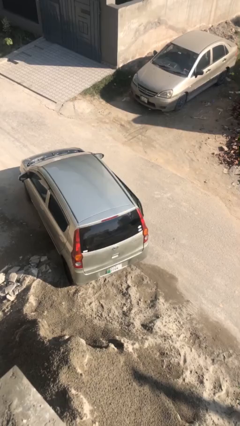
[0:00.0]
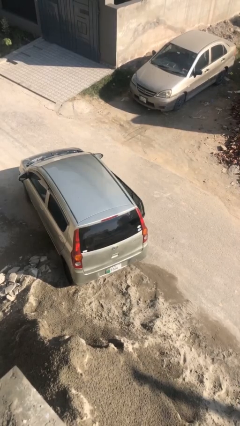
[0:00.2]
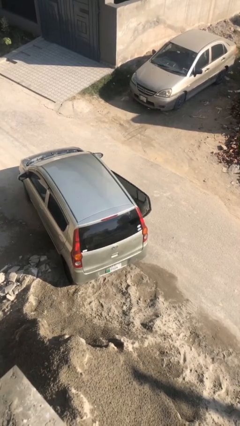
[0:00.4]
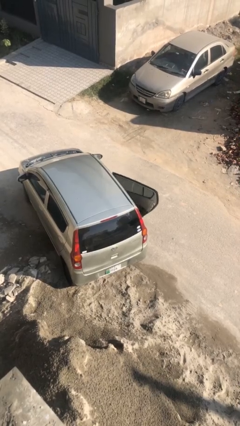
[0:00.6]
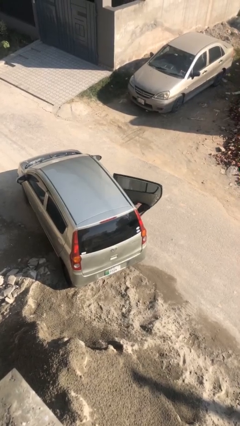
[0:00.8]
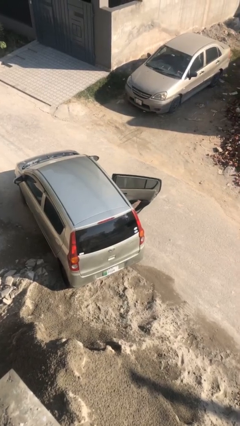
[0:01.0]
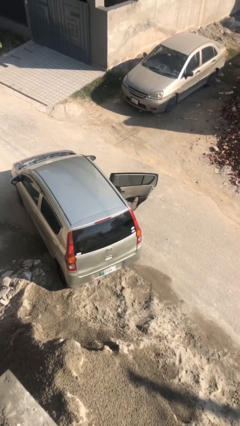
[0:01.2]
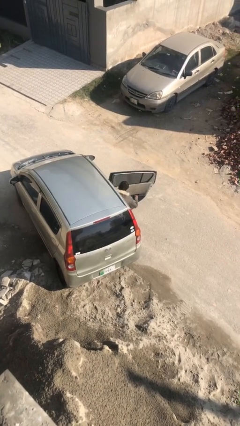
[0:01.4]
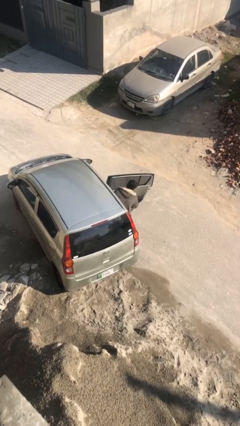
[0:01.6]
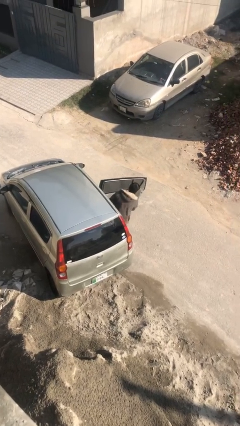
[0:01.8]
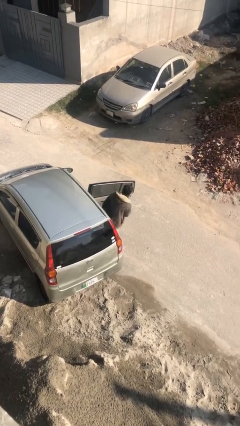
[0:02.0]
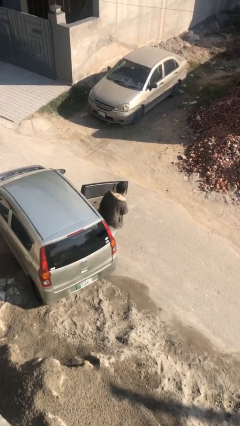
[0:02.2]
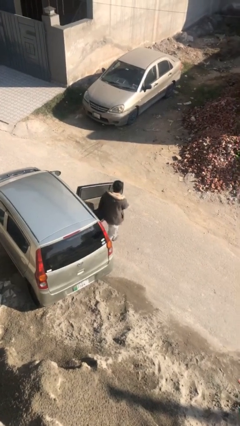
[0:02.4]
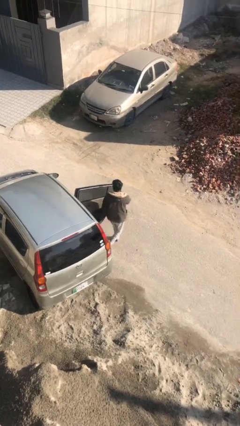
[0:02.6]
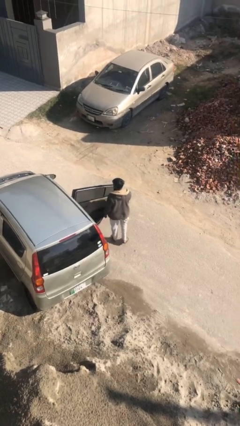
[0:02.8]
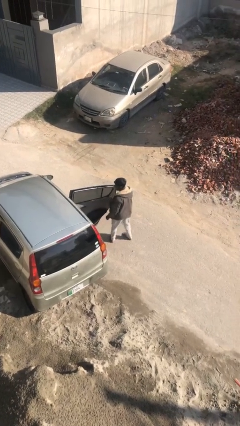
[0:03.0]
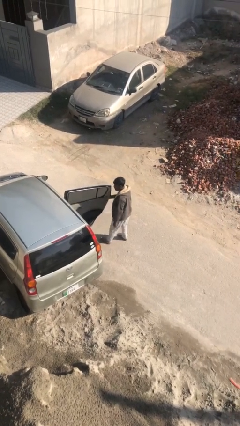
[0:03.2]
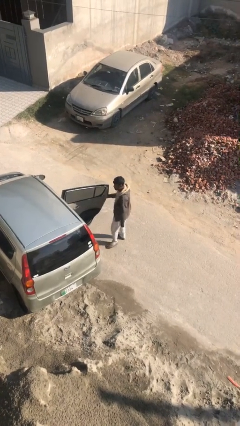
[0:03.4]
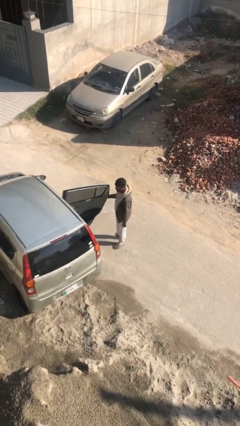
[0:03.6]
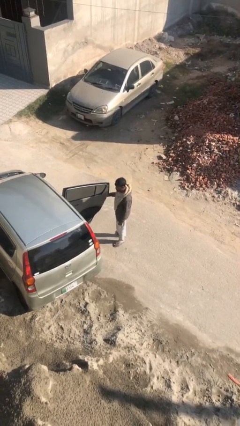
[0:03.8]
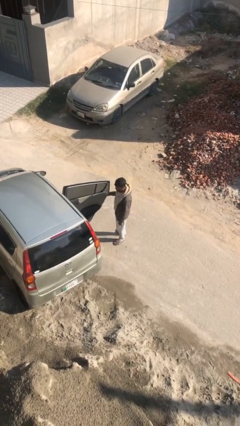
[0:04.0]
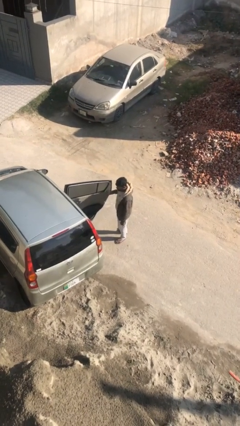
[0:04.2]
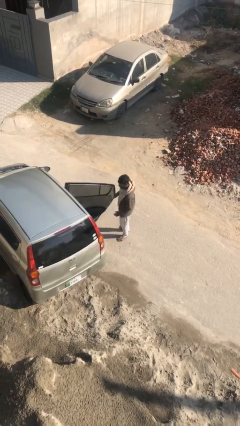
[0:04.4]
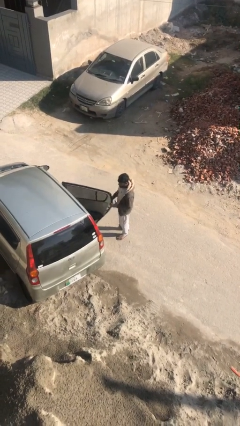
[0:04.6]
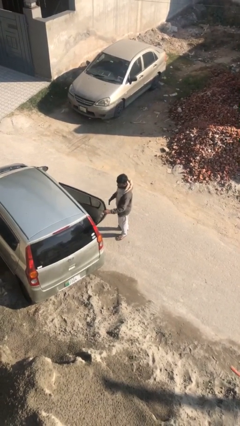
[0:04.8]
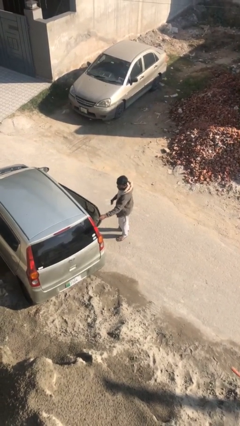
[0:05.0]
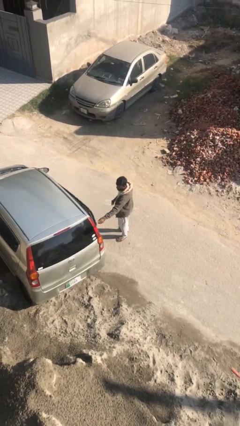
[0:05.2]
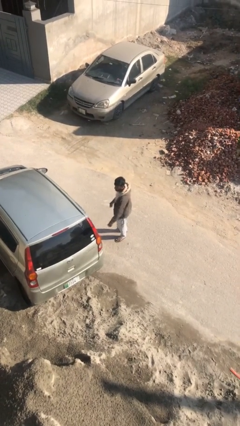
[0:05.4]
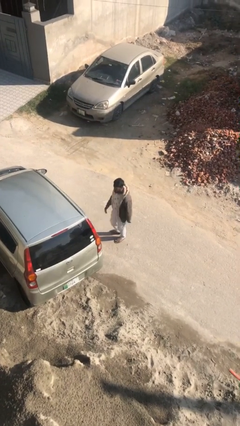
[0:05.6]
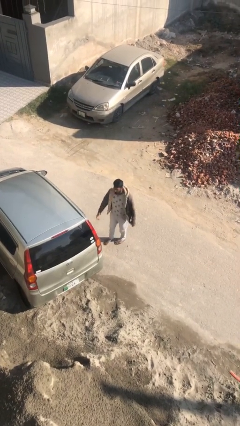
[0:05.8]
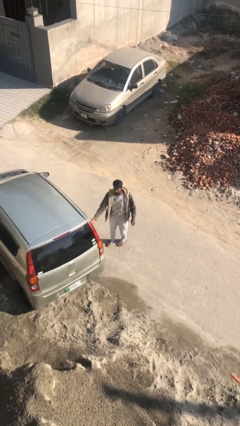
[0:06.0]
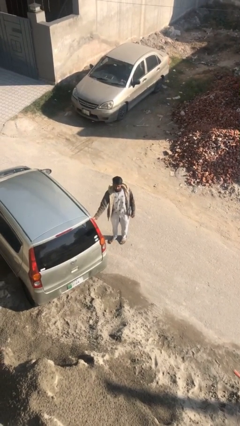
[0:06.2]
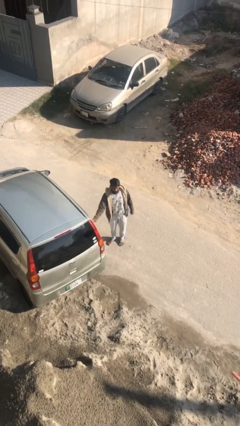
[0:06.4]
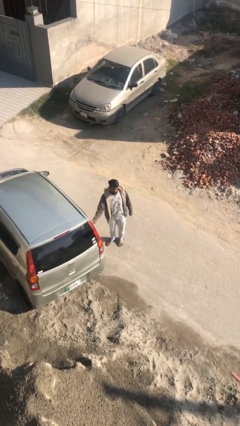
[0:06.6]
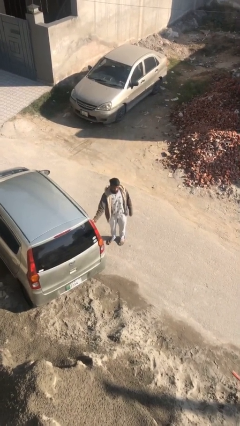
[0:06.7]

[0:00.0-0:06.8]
car drops off person

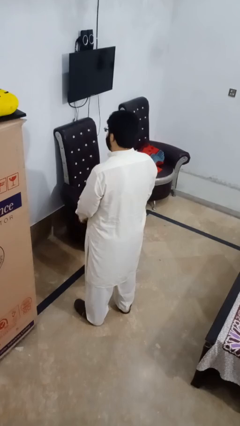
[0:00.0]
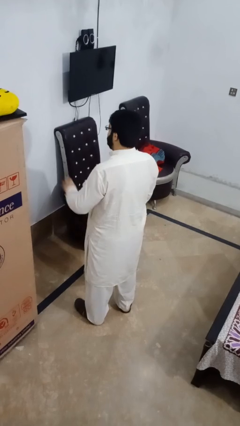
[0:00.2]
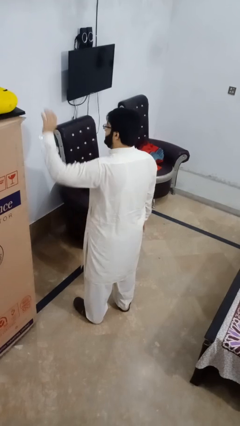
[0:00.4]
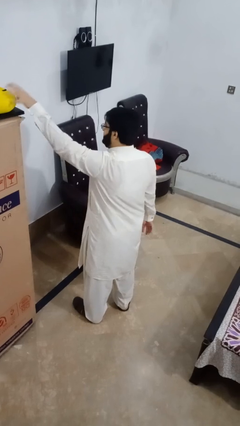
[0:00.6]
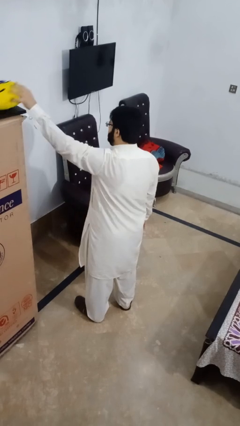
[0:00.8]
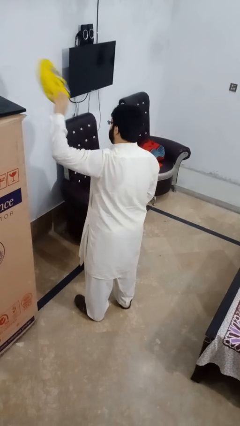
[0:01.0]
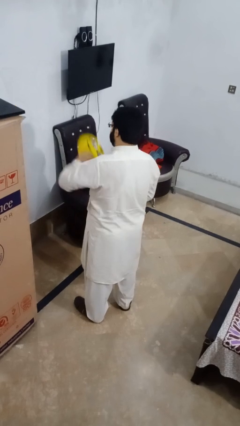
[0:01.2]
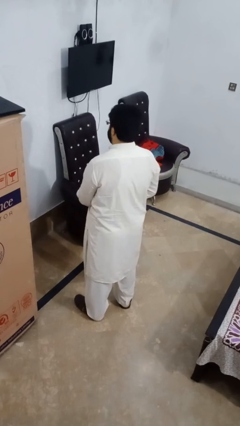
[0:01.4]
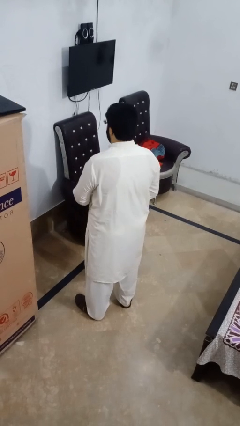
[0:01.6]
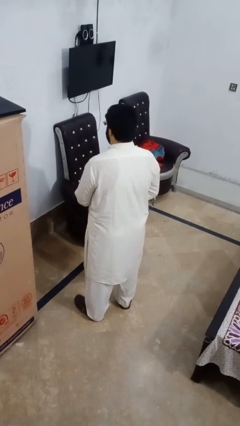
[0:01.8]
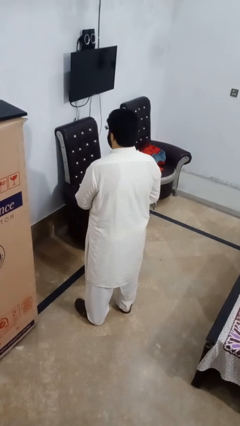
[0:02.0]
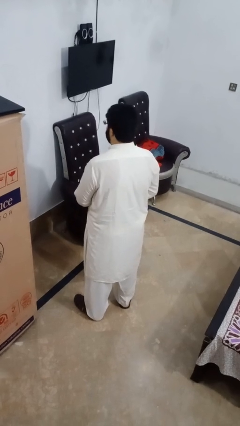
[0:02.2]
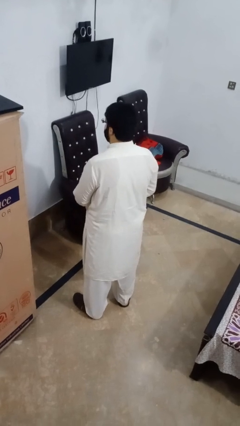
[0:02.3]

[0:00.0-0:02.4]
person picks up object from shelf

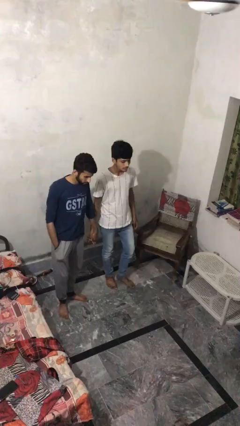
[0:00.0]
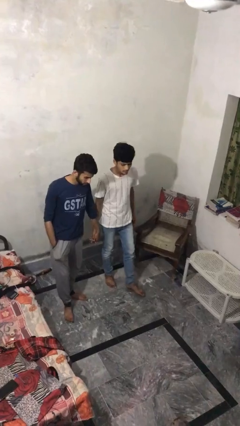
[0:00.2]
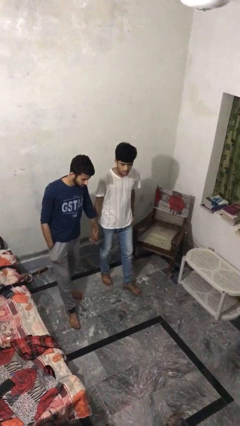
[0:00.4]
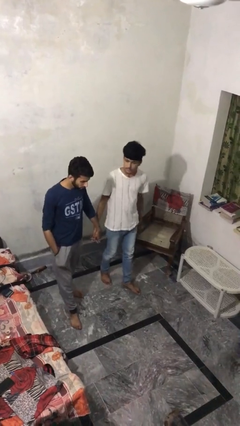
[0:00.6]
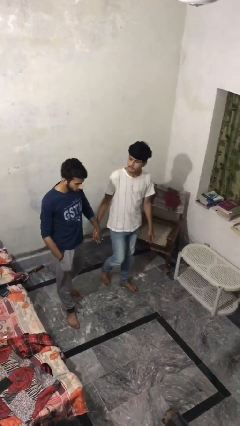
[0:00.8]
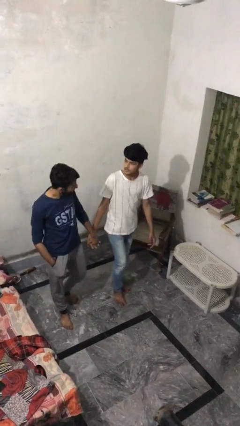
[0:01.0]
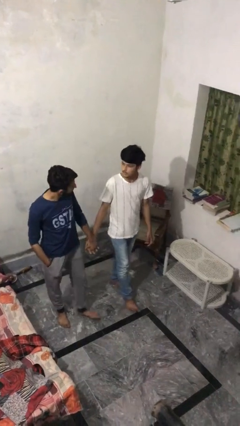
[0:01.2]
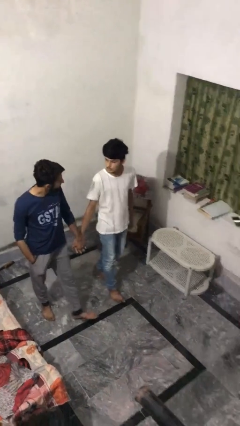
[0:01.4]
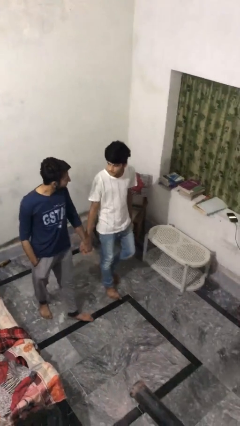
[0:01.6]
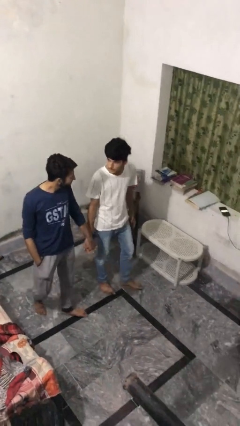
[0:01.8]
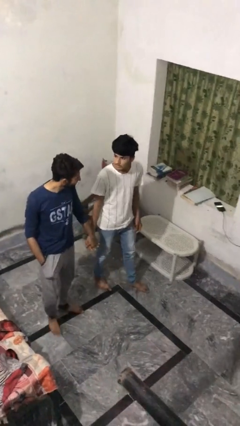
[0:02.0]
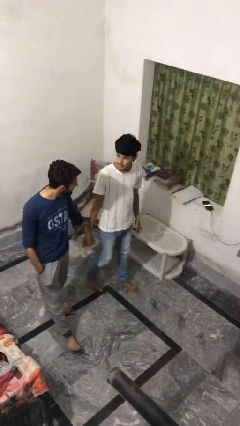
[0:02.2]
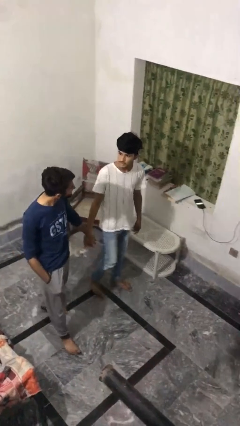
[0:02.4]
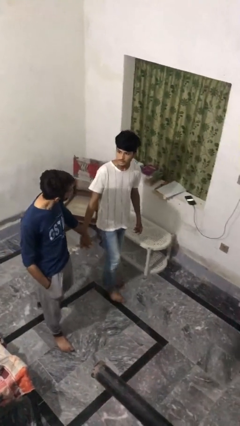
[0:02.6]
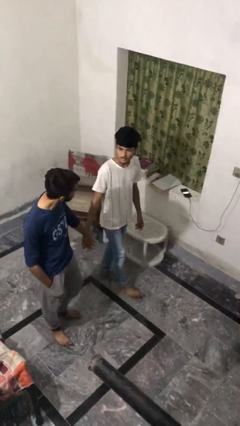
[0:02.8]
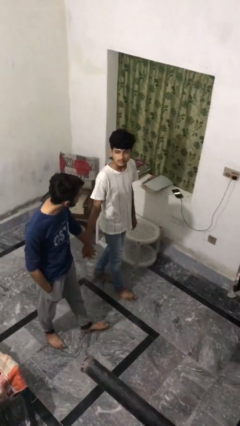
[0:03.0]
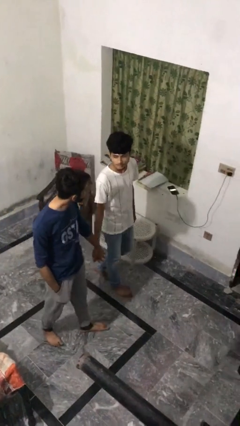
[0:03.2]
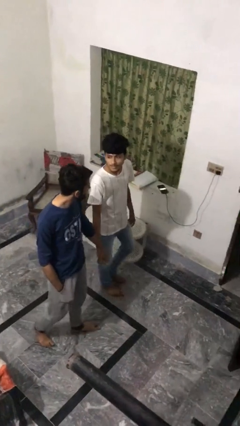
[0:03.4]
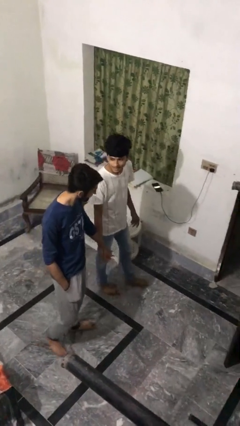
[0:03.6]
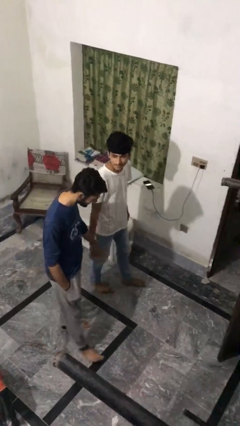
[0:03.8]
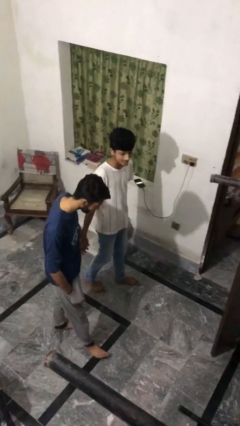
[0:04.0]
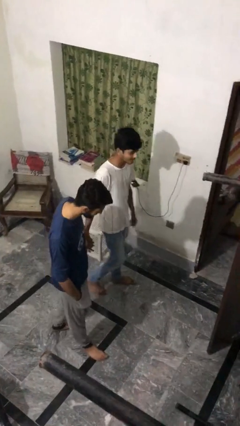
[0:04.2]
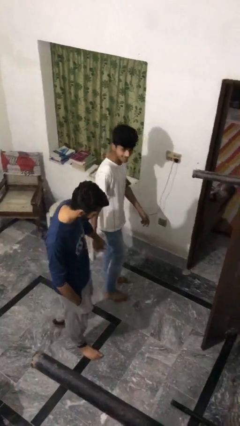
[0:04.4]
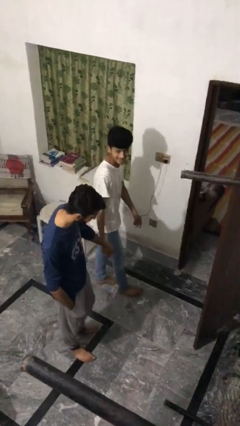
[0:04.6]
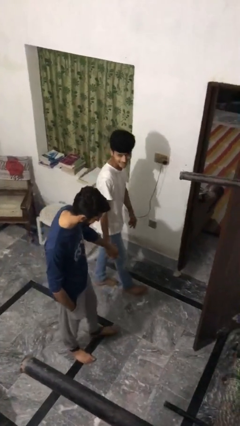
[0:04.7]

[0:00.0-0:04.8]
person holds hand

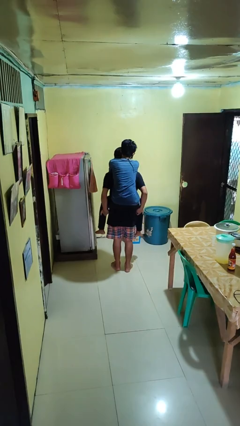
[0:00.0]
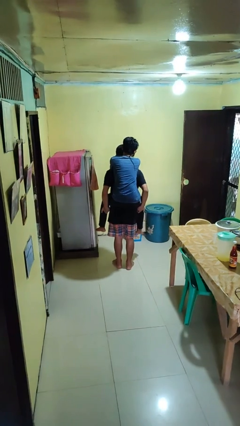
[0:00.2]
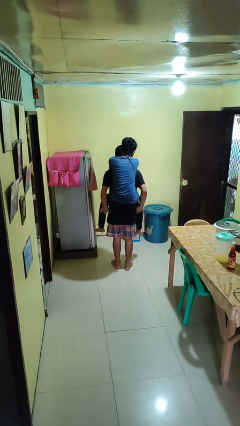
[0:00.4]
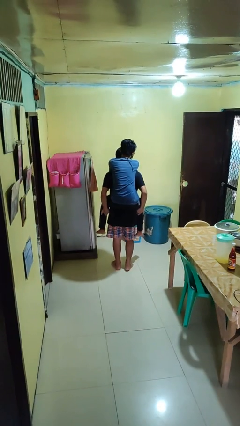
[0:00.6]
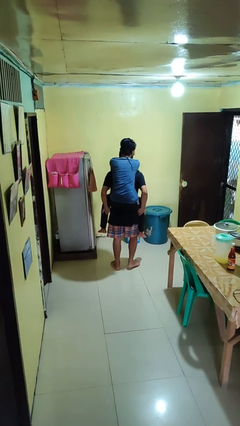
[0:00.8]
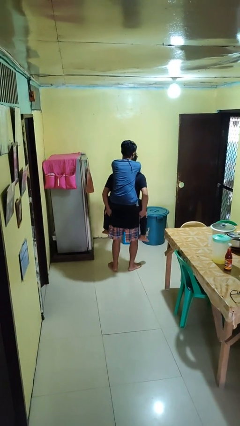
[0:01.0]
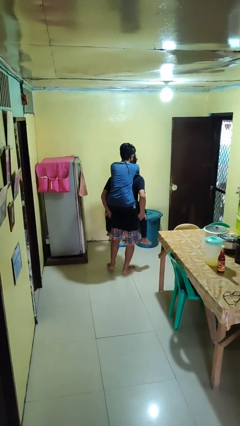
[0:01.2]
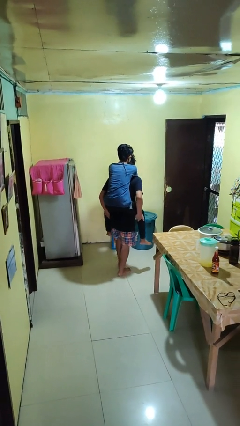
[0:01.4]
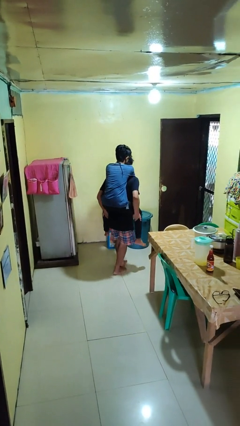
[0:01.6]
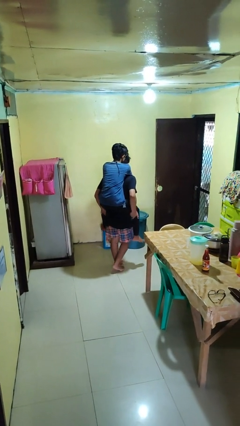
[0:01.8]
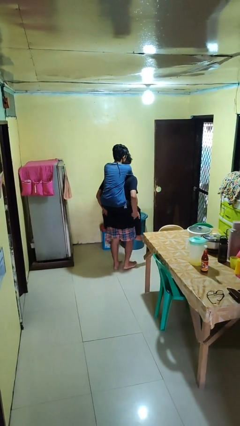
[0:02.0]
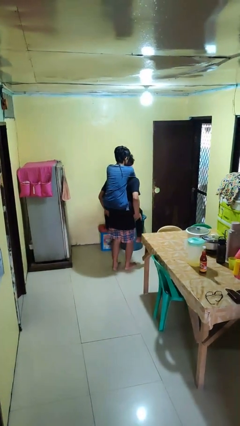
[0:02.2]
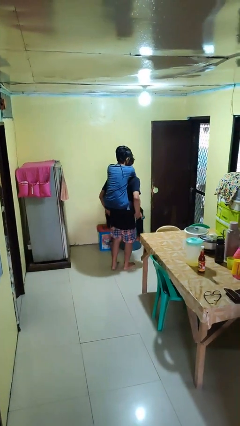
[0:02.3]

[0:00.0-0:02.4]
person carries person on back

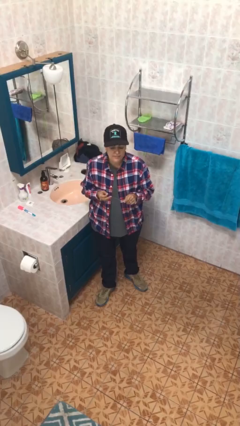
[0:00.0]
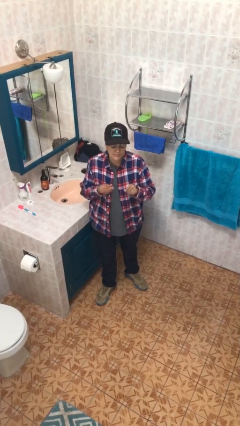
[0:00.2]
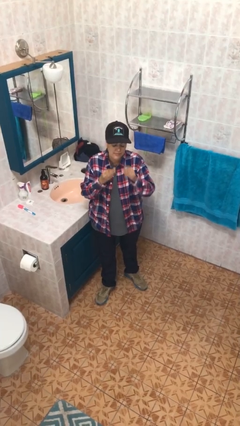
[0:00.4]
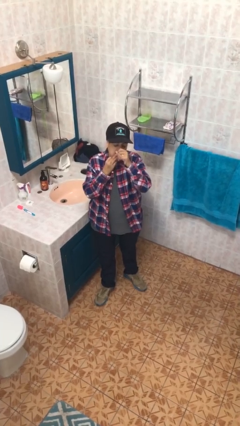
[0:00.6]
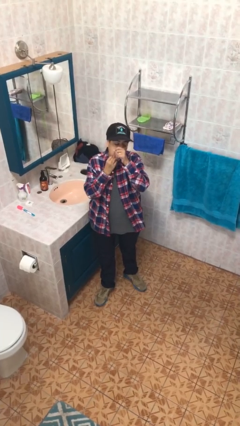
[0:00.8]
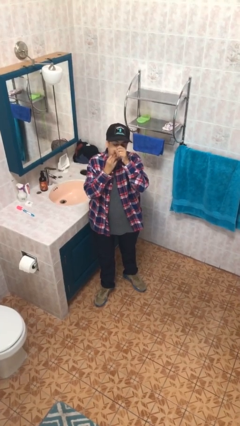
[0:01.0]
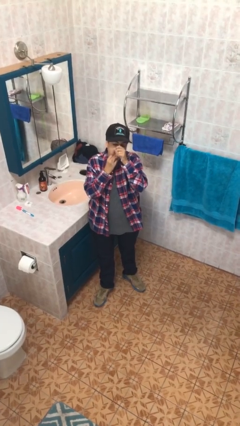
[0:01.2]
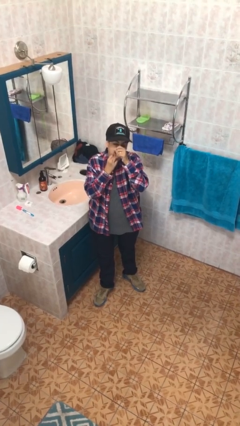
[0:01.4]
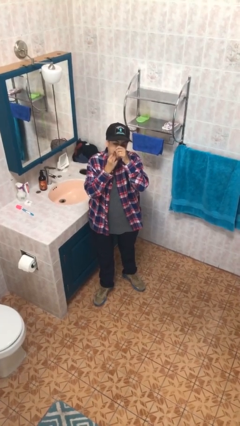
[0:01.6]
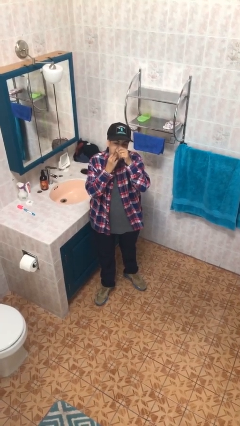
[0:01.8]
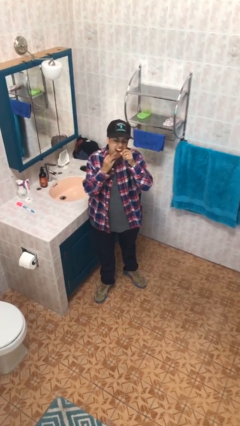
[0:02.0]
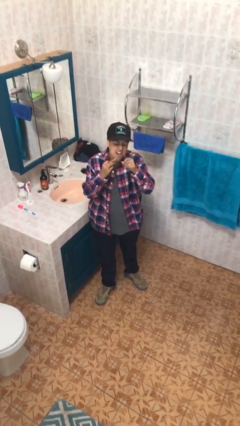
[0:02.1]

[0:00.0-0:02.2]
person flosses
